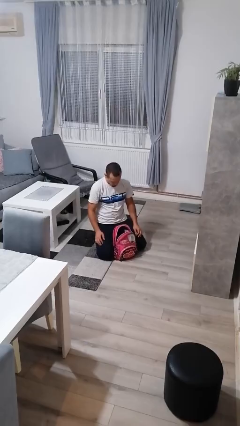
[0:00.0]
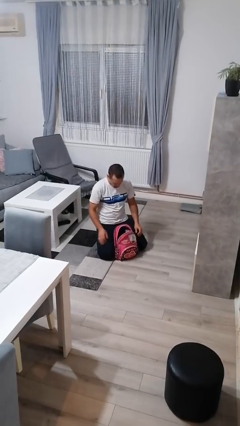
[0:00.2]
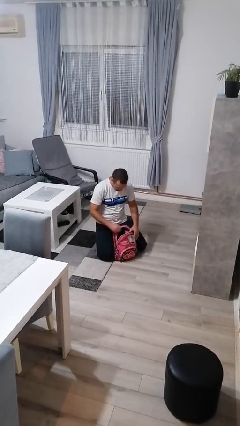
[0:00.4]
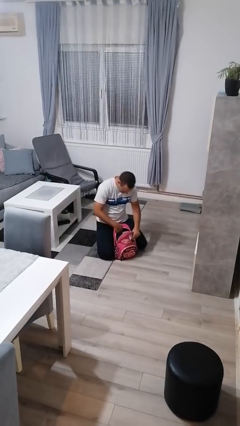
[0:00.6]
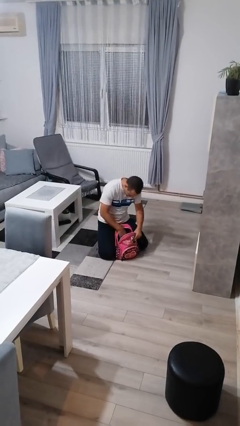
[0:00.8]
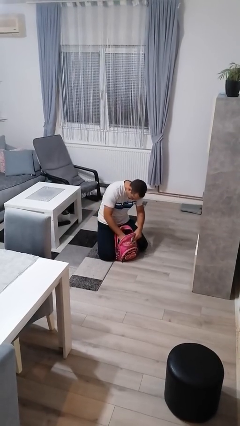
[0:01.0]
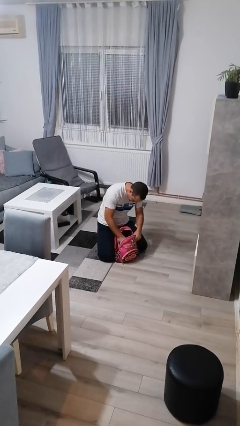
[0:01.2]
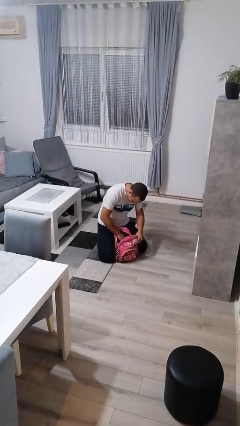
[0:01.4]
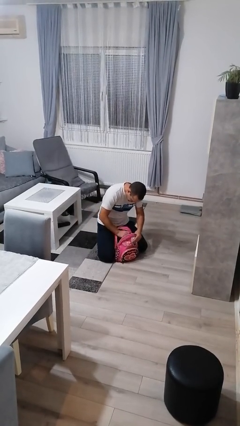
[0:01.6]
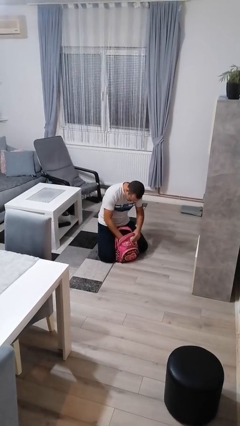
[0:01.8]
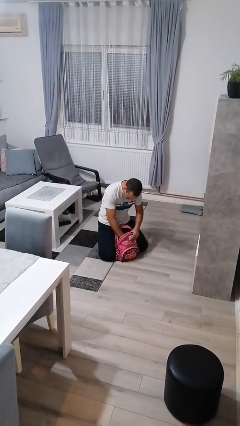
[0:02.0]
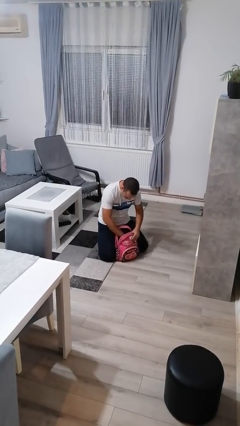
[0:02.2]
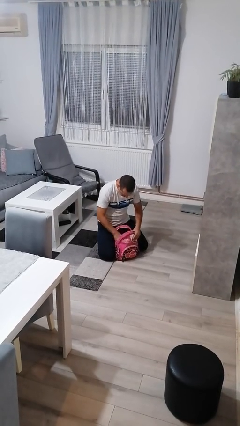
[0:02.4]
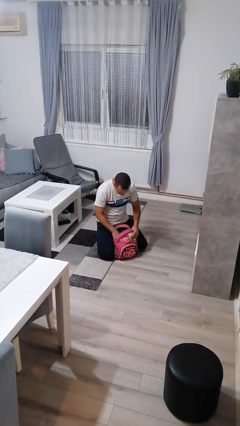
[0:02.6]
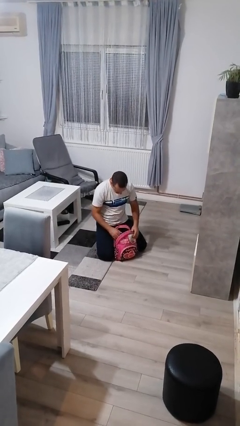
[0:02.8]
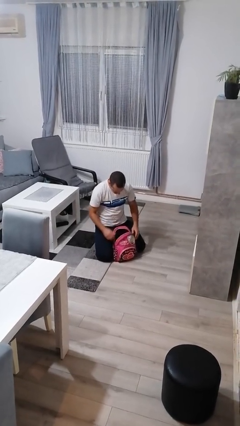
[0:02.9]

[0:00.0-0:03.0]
person searches in bag

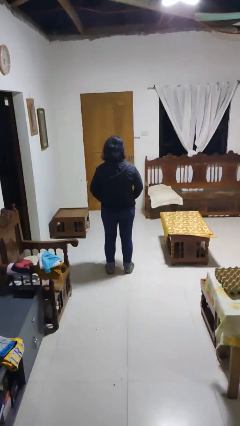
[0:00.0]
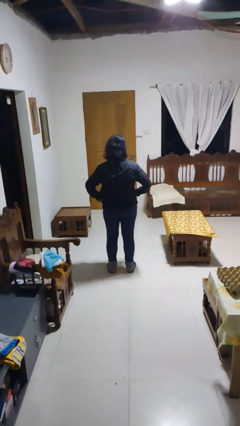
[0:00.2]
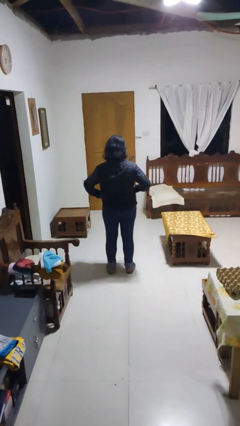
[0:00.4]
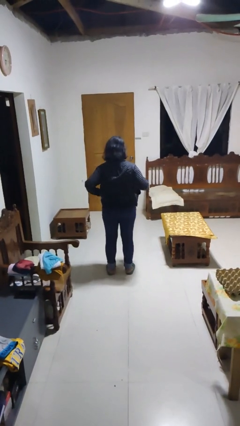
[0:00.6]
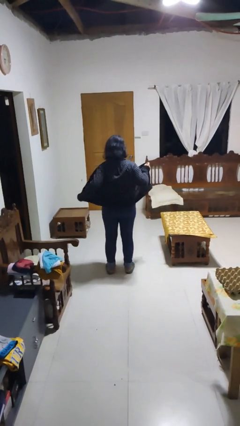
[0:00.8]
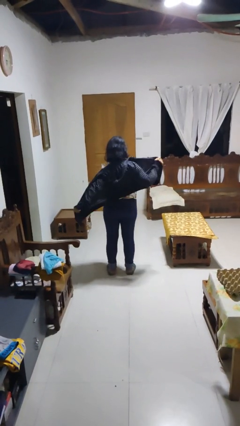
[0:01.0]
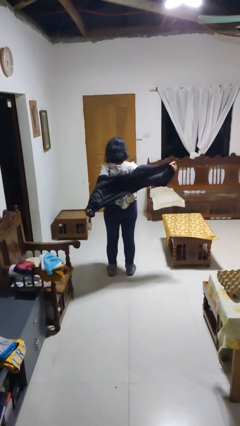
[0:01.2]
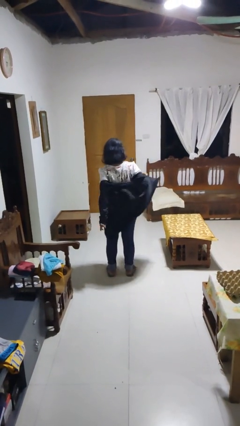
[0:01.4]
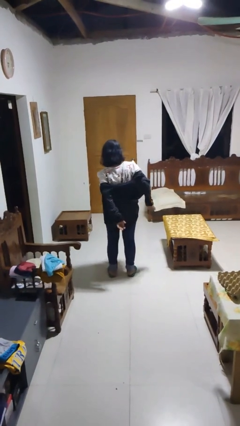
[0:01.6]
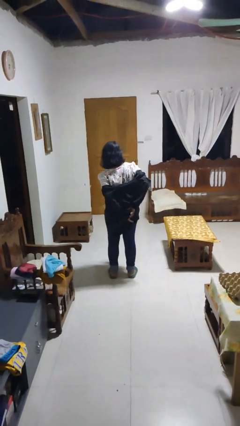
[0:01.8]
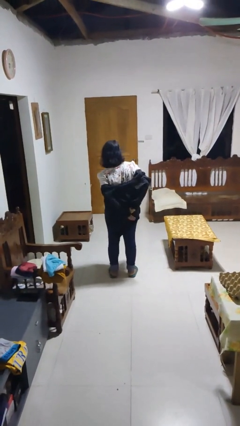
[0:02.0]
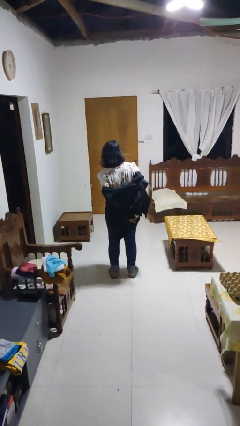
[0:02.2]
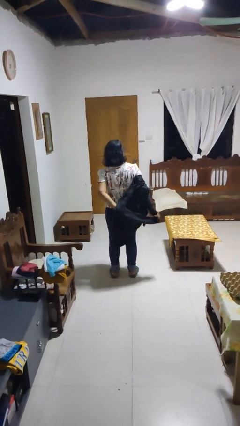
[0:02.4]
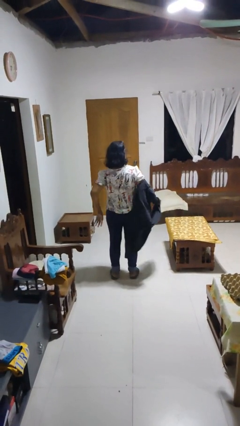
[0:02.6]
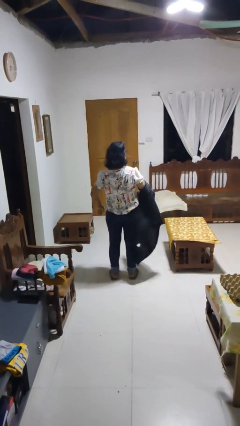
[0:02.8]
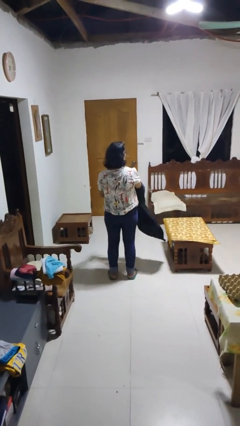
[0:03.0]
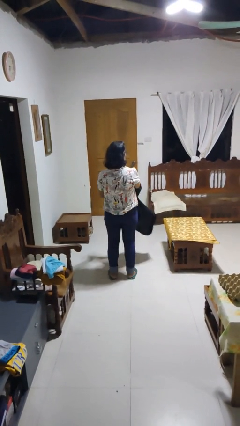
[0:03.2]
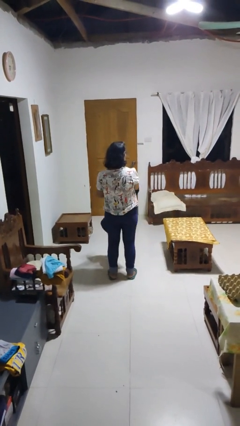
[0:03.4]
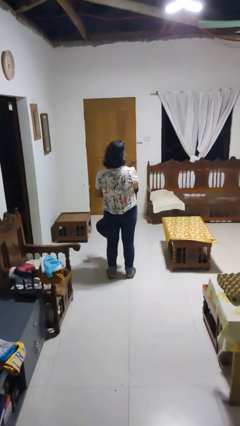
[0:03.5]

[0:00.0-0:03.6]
person takes off jacket

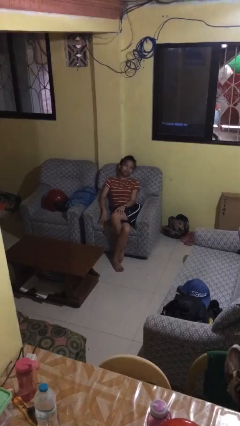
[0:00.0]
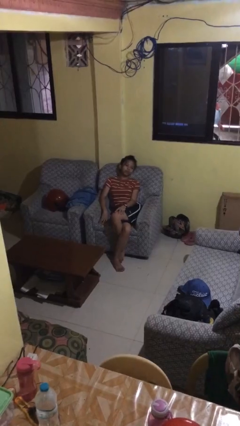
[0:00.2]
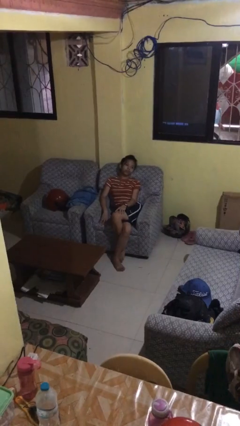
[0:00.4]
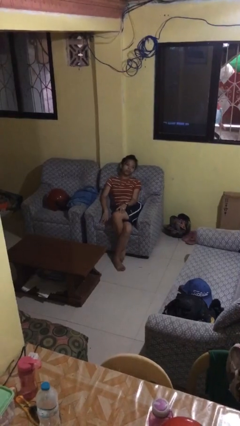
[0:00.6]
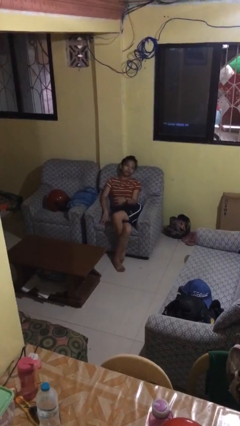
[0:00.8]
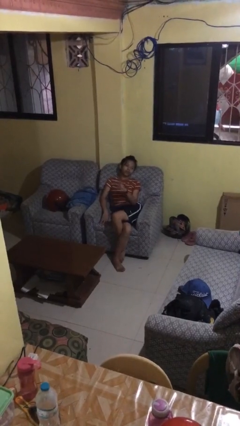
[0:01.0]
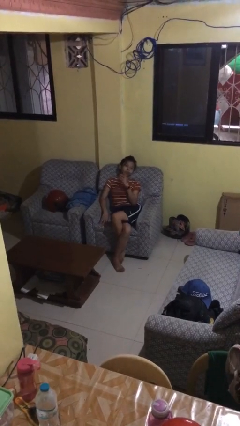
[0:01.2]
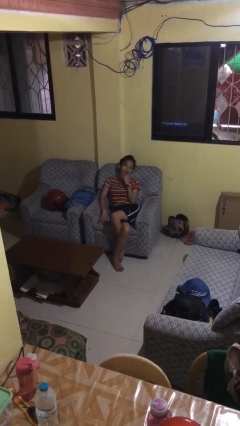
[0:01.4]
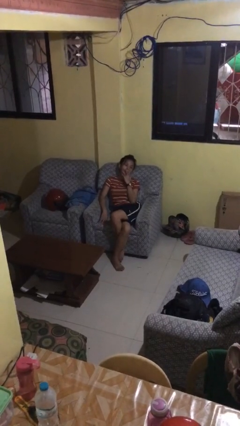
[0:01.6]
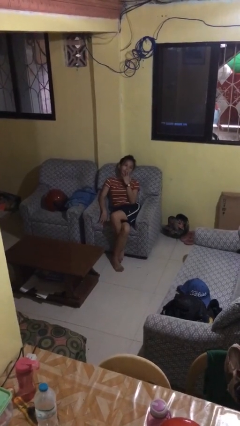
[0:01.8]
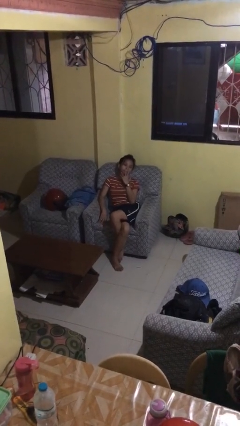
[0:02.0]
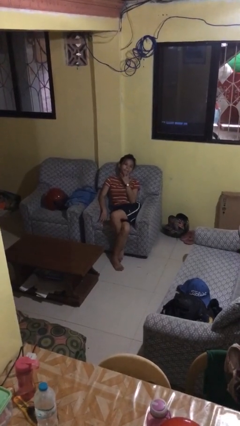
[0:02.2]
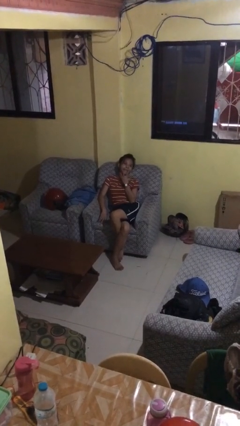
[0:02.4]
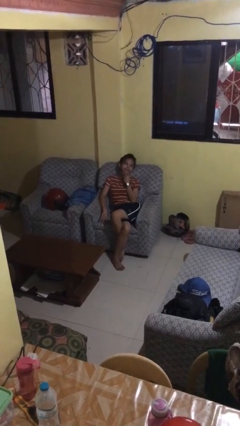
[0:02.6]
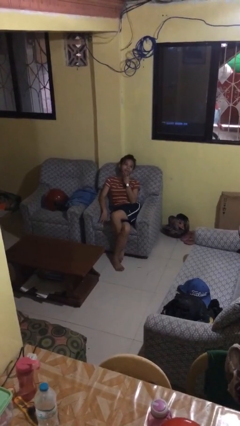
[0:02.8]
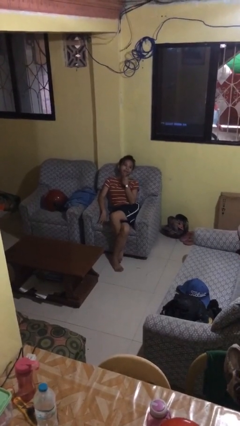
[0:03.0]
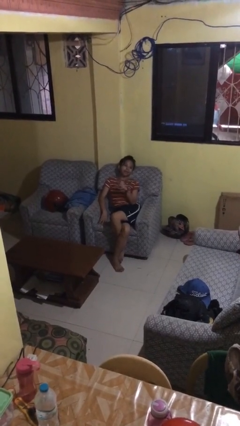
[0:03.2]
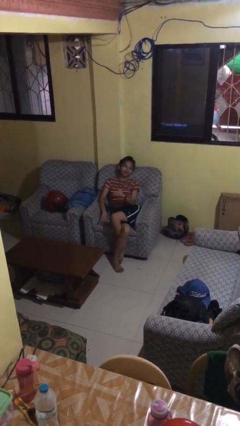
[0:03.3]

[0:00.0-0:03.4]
person strokes chin

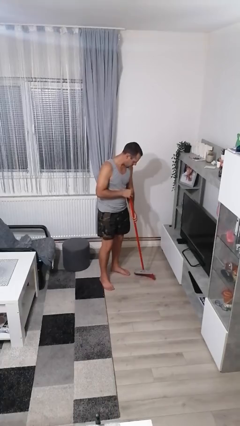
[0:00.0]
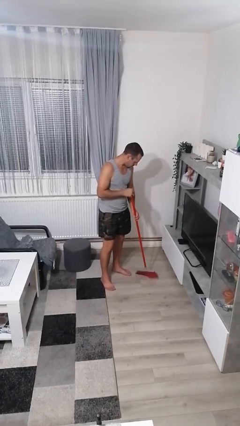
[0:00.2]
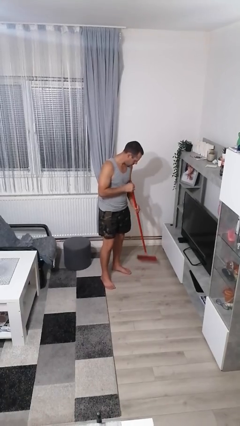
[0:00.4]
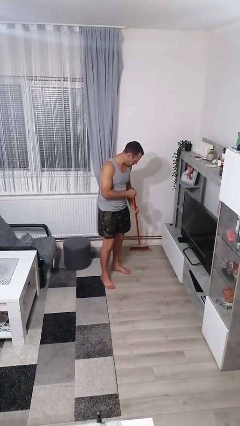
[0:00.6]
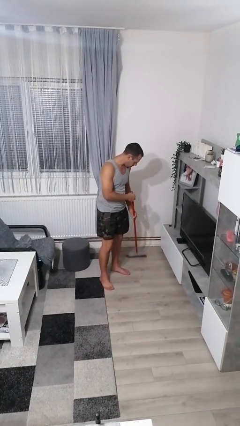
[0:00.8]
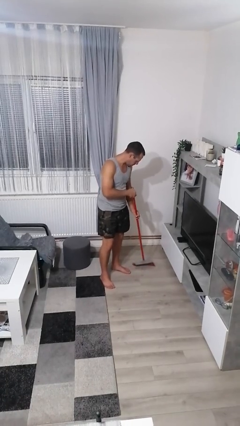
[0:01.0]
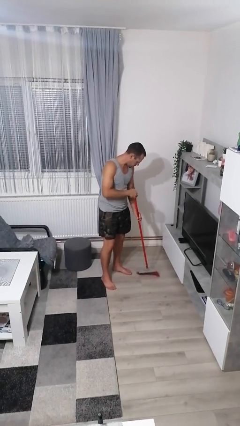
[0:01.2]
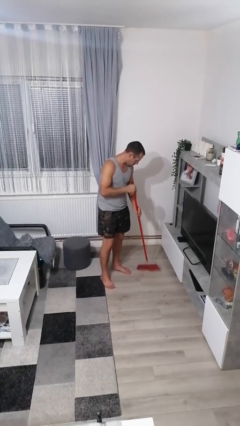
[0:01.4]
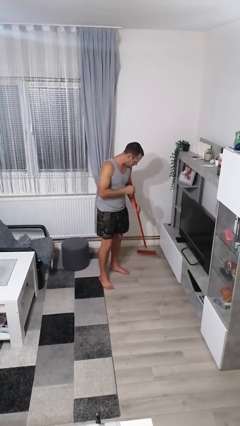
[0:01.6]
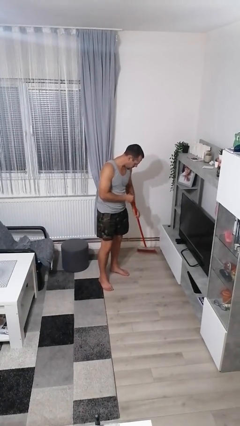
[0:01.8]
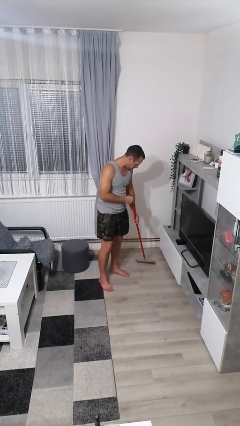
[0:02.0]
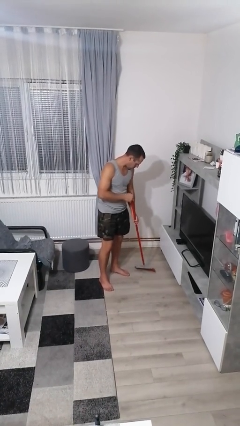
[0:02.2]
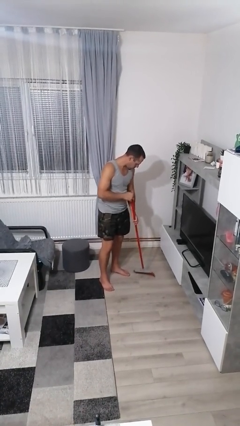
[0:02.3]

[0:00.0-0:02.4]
person sweeps floor

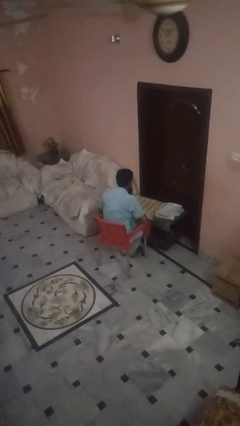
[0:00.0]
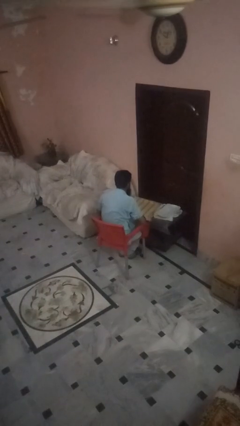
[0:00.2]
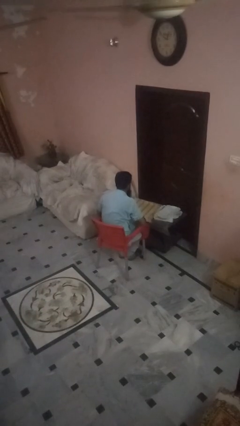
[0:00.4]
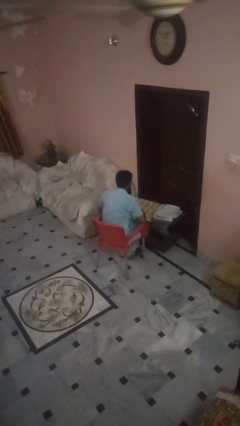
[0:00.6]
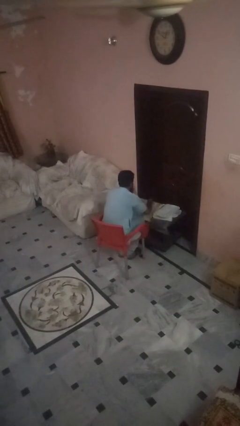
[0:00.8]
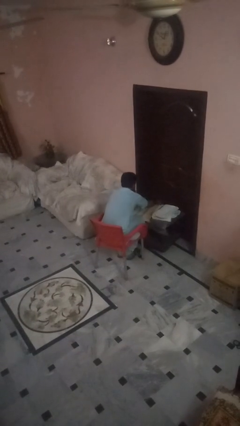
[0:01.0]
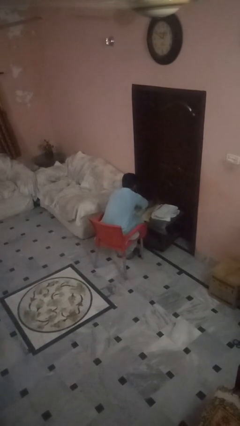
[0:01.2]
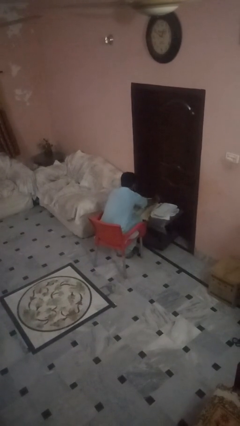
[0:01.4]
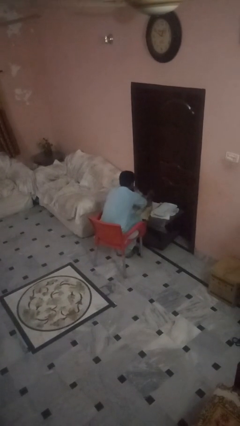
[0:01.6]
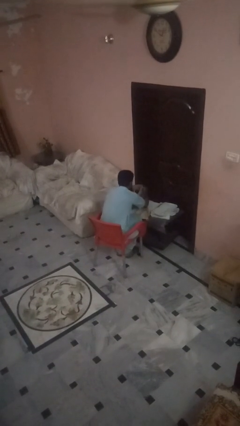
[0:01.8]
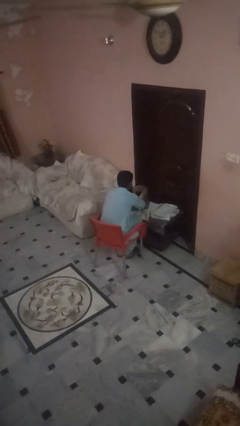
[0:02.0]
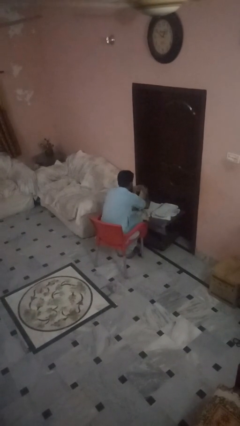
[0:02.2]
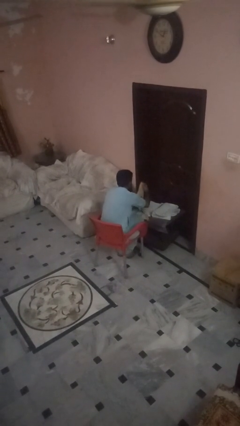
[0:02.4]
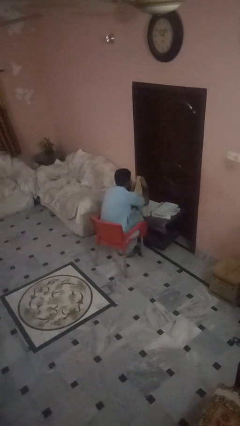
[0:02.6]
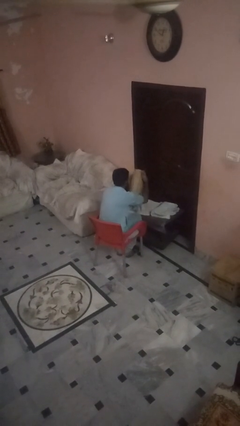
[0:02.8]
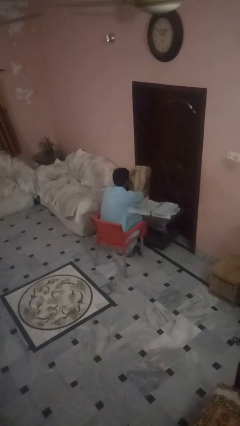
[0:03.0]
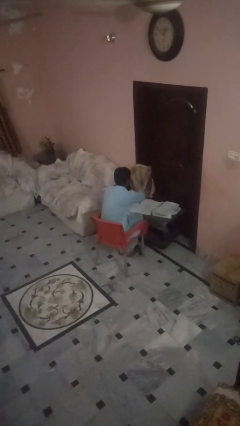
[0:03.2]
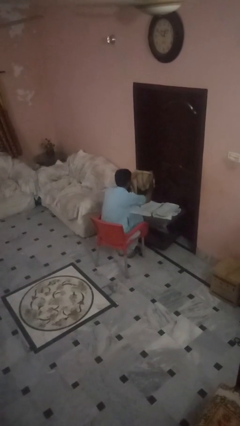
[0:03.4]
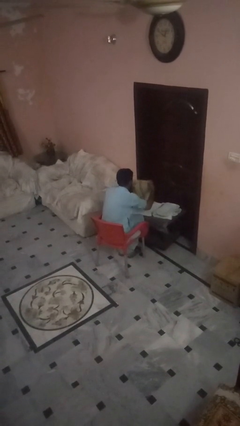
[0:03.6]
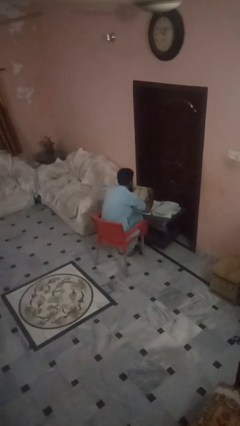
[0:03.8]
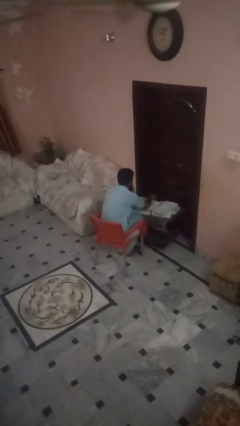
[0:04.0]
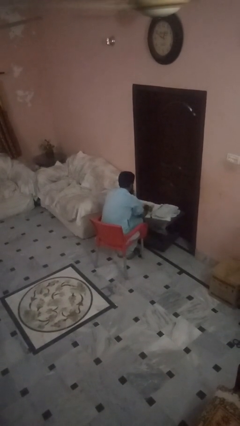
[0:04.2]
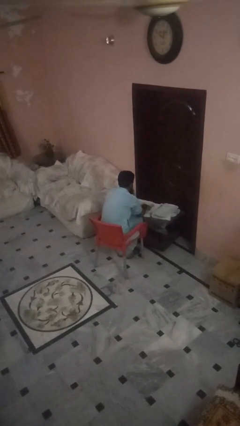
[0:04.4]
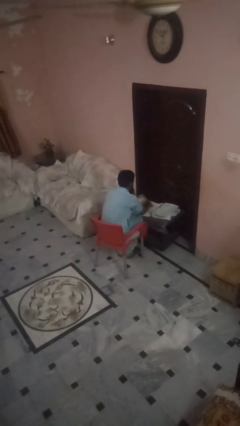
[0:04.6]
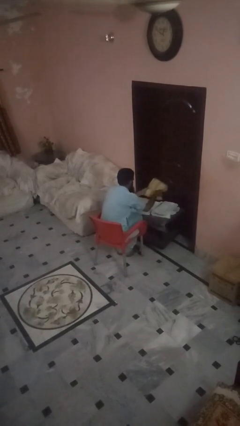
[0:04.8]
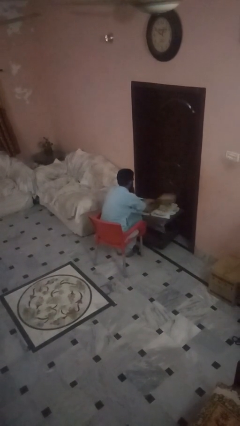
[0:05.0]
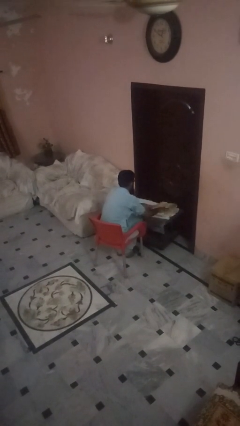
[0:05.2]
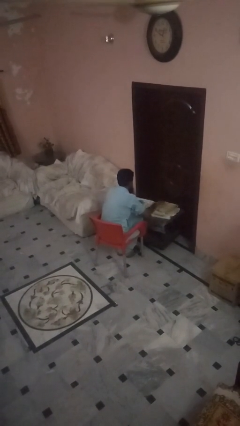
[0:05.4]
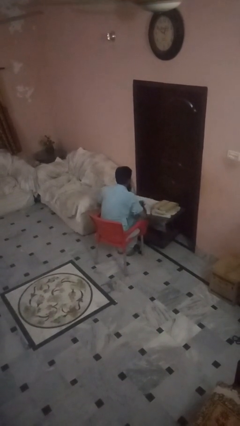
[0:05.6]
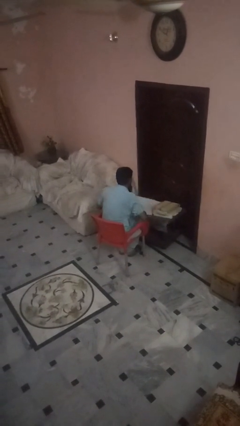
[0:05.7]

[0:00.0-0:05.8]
person folds towel
